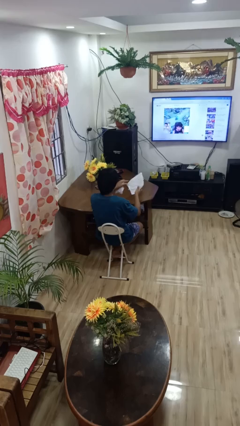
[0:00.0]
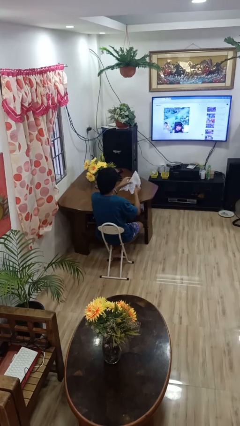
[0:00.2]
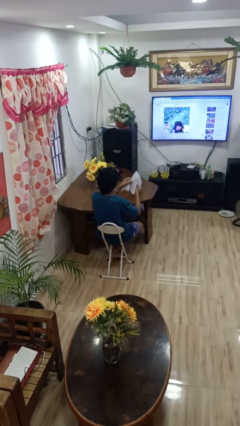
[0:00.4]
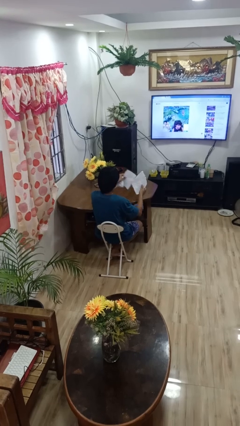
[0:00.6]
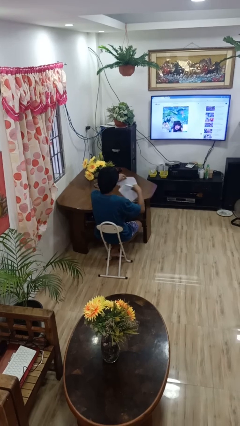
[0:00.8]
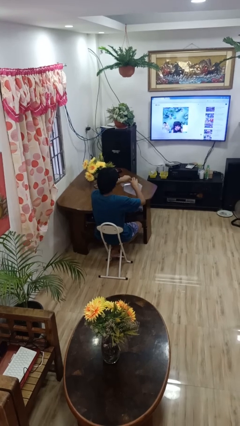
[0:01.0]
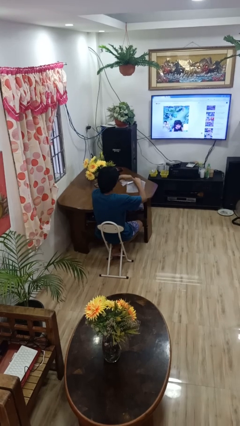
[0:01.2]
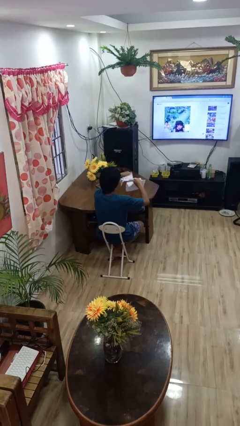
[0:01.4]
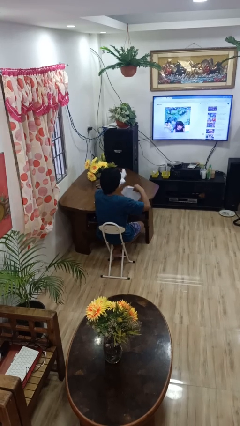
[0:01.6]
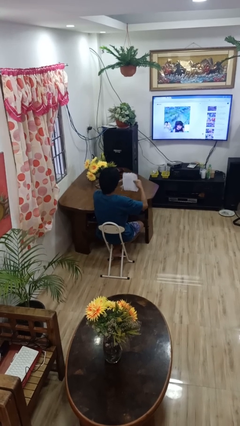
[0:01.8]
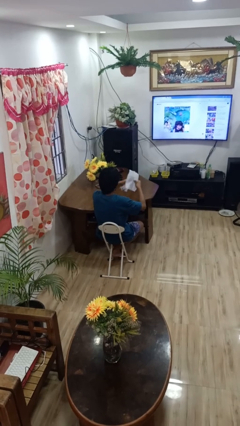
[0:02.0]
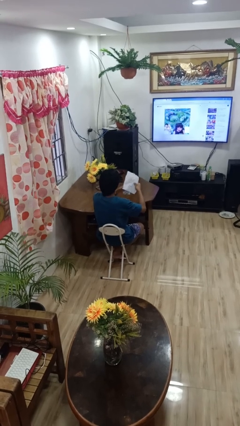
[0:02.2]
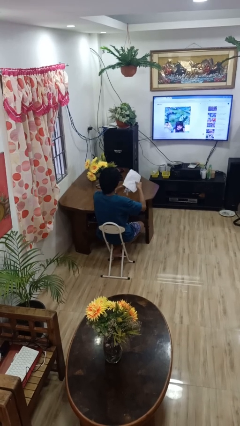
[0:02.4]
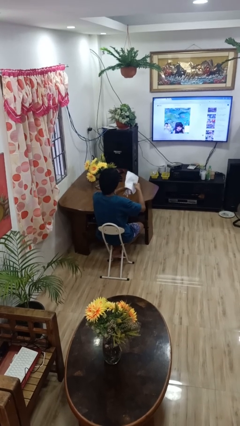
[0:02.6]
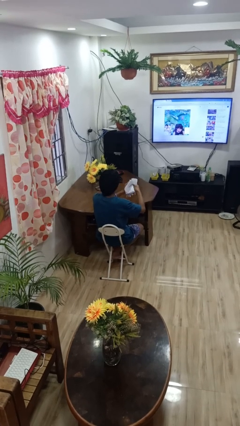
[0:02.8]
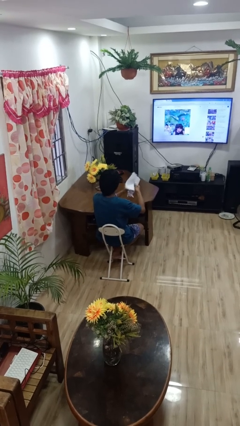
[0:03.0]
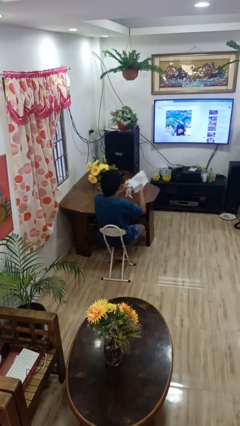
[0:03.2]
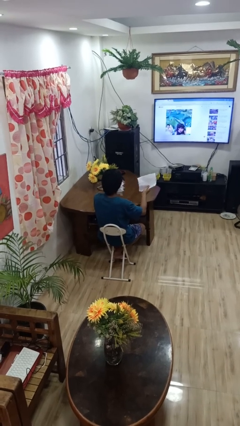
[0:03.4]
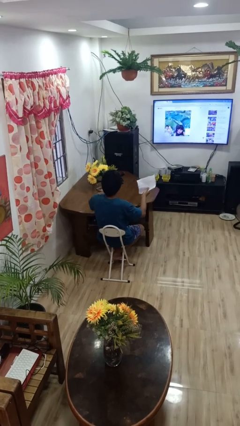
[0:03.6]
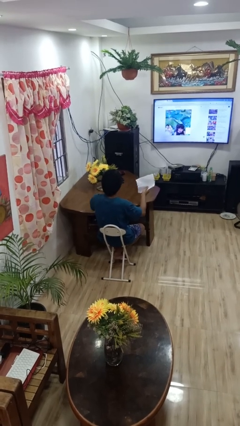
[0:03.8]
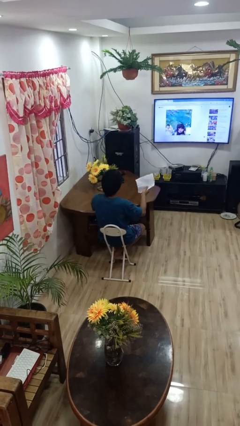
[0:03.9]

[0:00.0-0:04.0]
person tears paper

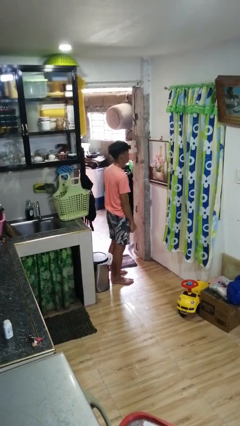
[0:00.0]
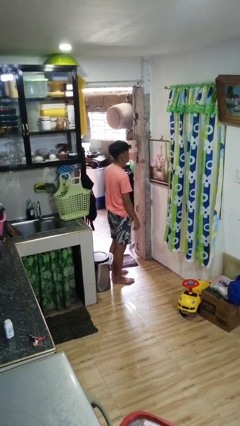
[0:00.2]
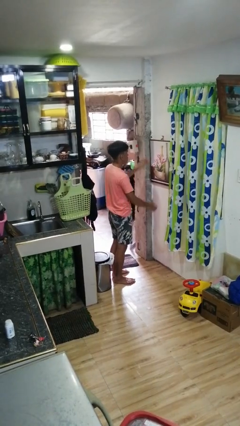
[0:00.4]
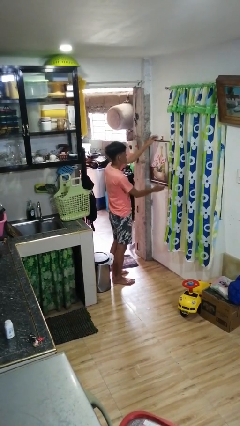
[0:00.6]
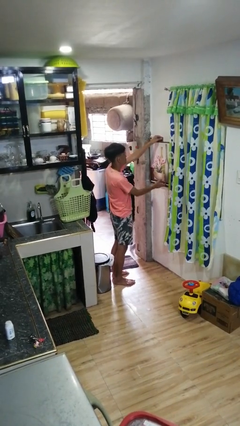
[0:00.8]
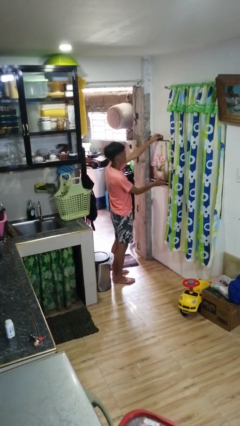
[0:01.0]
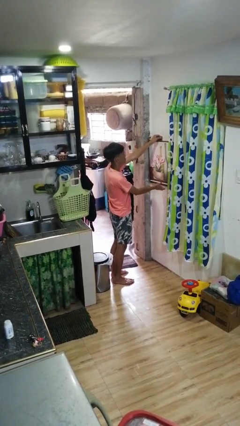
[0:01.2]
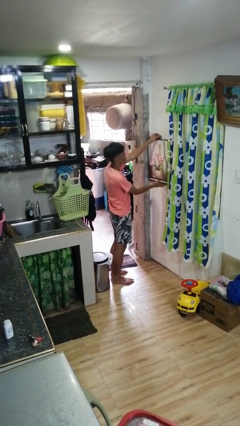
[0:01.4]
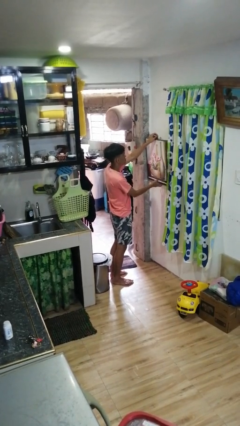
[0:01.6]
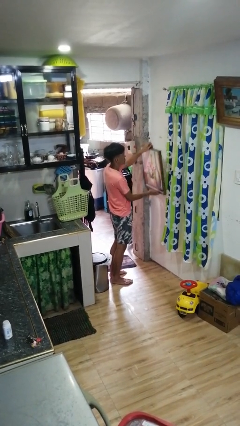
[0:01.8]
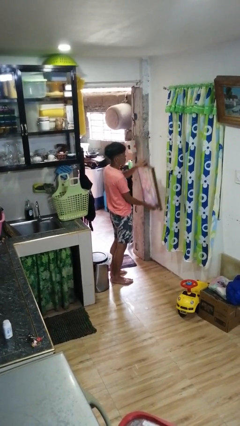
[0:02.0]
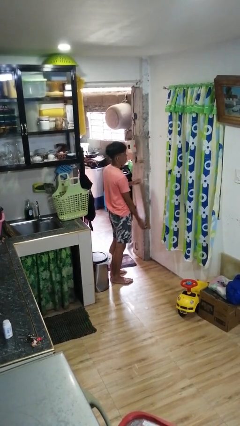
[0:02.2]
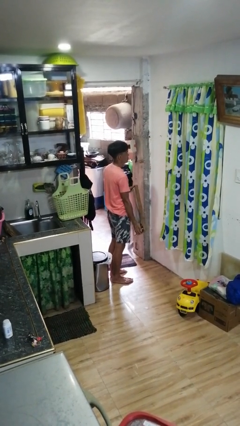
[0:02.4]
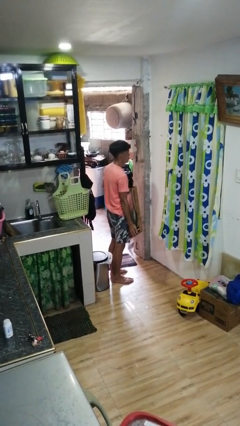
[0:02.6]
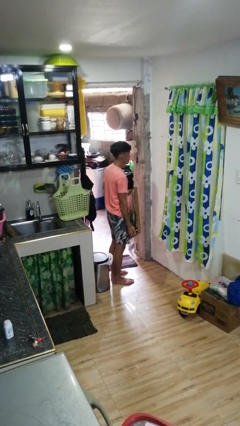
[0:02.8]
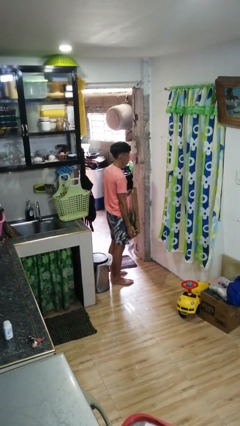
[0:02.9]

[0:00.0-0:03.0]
person takes down picture frame

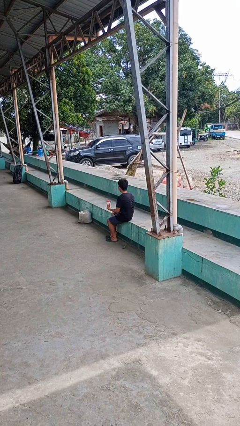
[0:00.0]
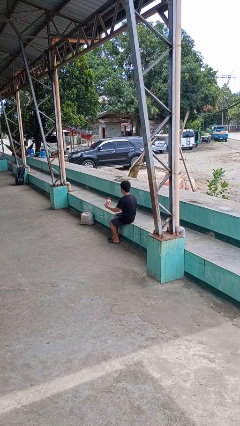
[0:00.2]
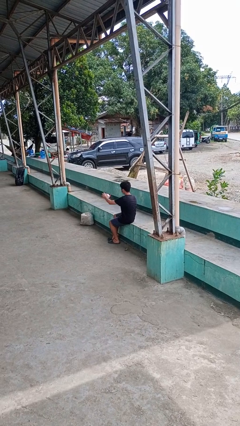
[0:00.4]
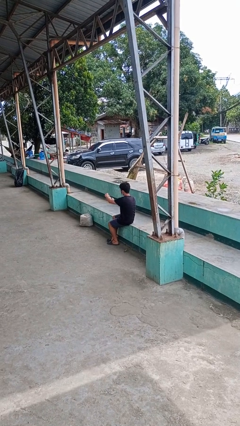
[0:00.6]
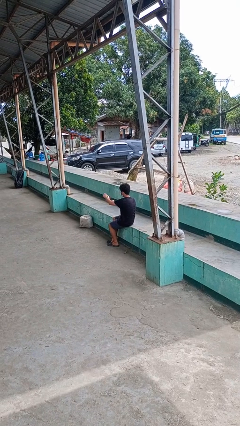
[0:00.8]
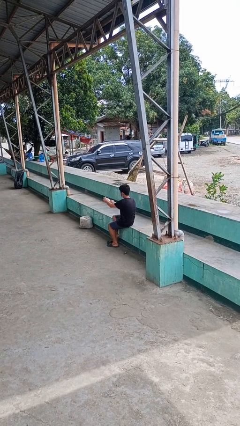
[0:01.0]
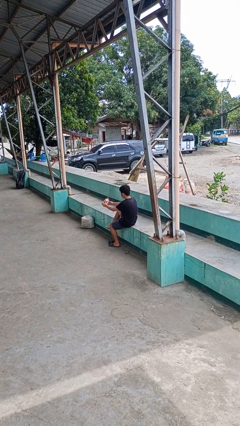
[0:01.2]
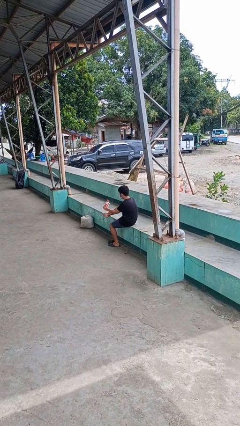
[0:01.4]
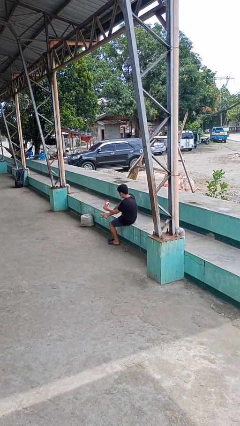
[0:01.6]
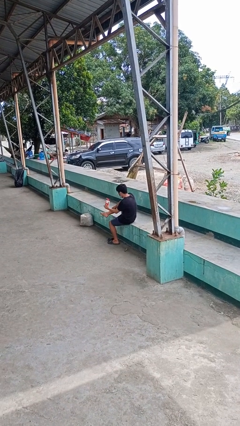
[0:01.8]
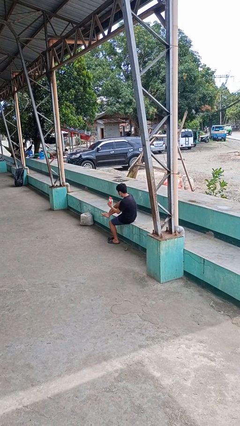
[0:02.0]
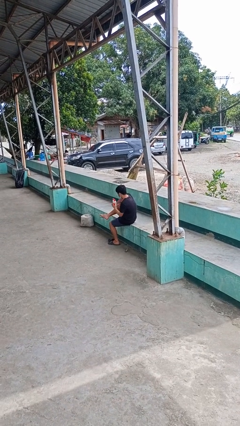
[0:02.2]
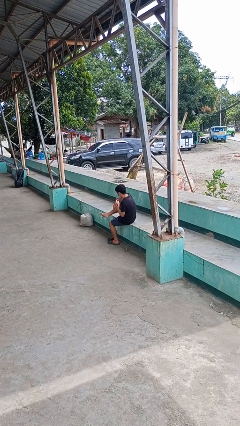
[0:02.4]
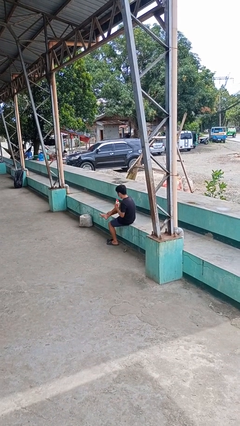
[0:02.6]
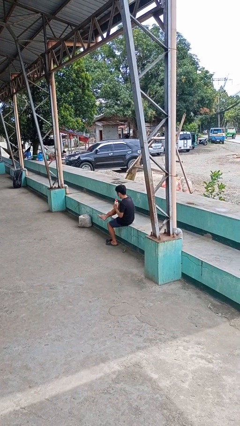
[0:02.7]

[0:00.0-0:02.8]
person applies sunscreen

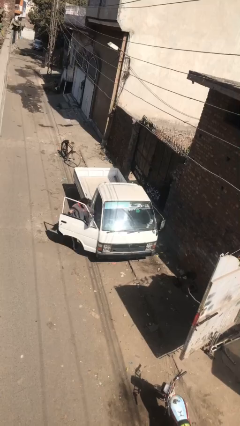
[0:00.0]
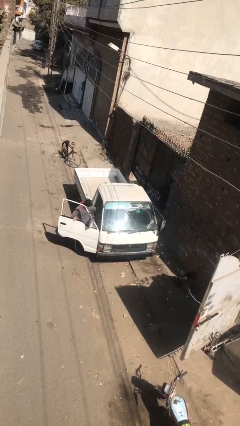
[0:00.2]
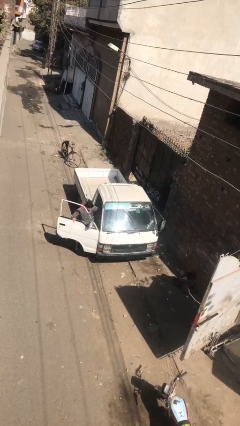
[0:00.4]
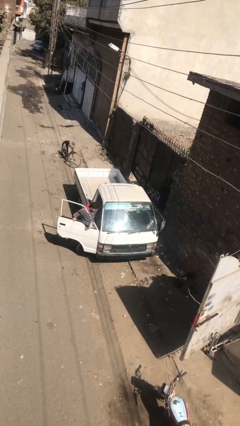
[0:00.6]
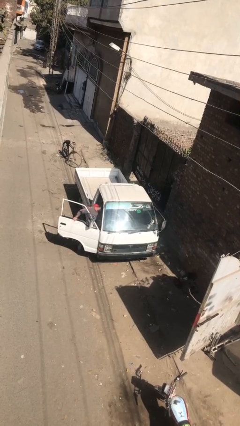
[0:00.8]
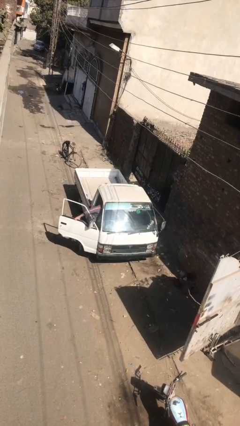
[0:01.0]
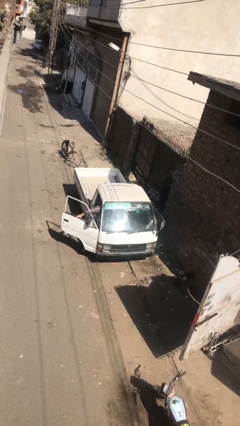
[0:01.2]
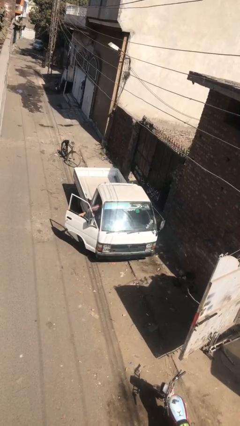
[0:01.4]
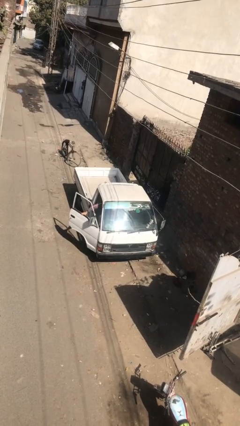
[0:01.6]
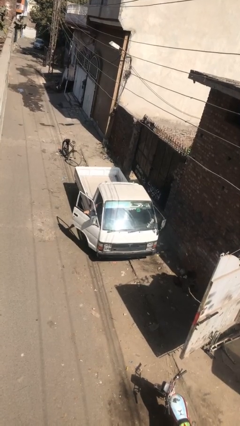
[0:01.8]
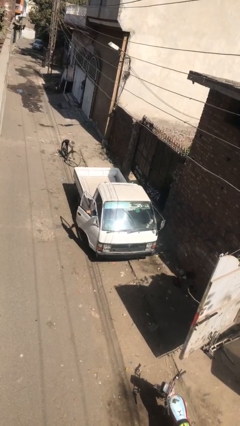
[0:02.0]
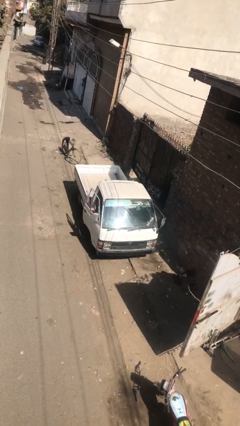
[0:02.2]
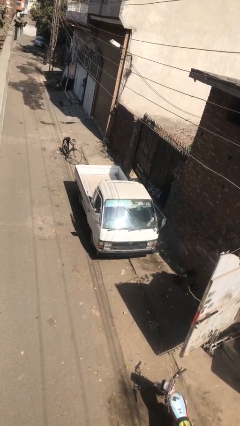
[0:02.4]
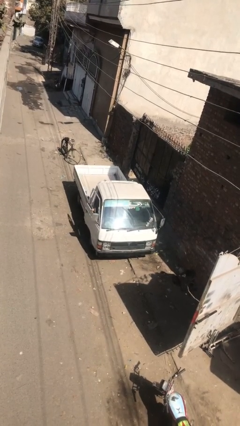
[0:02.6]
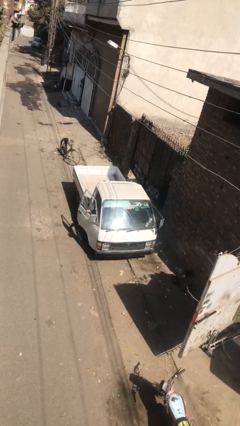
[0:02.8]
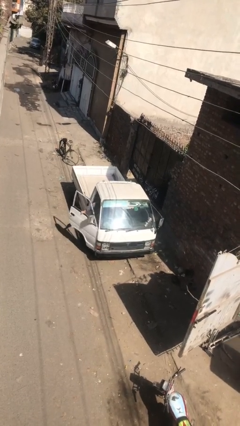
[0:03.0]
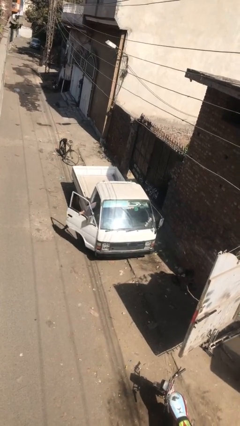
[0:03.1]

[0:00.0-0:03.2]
car picks up person

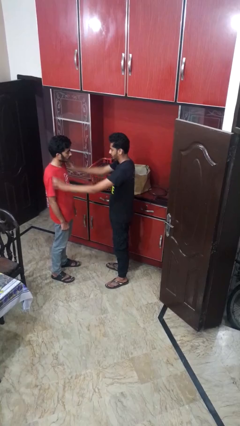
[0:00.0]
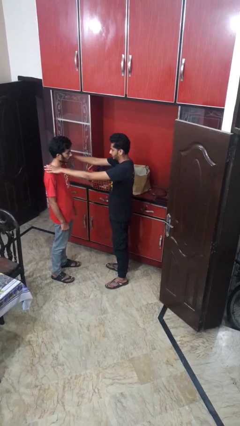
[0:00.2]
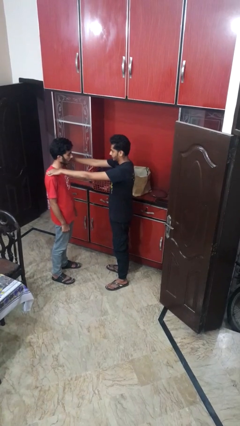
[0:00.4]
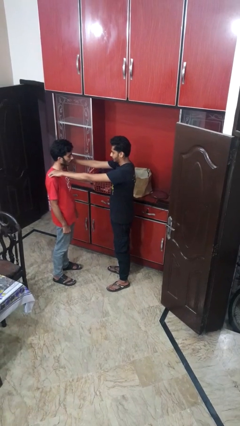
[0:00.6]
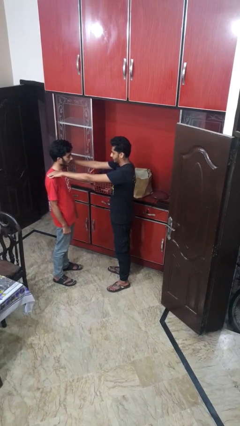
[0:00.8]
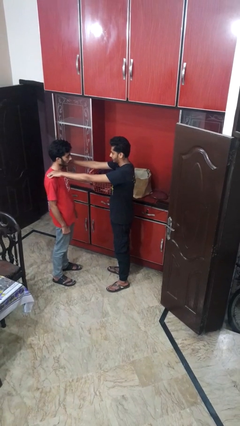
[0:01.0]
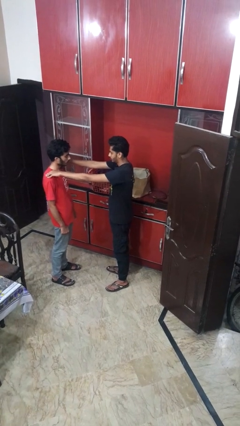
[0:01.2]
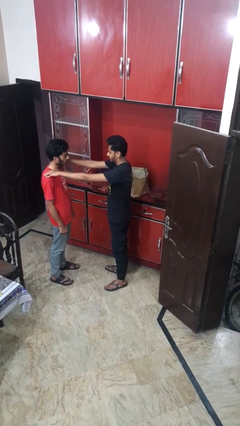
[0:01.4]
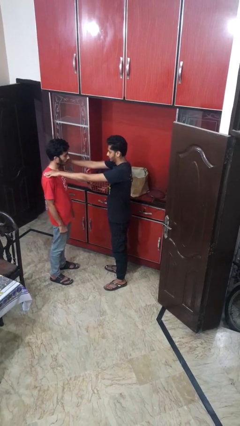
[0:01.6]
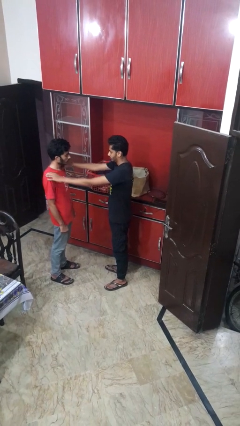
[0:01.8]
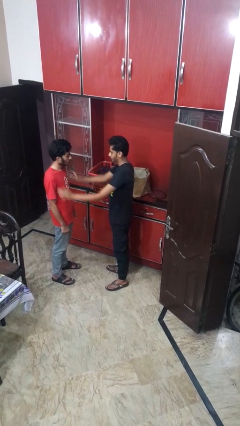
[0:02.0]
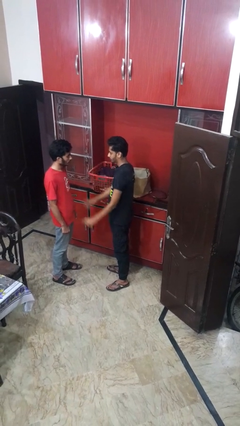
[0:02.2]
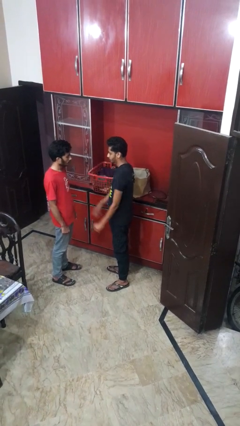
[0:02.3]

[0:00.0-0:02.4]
person pounds shoulders of person

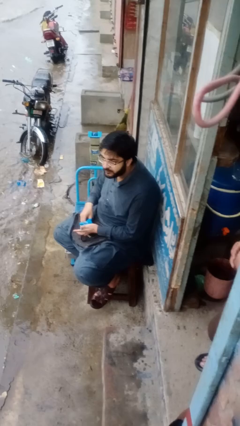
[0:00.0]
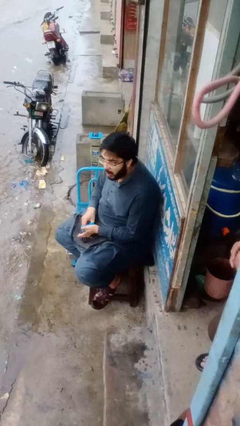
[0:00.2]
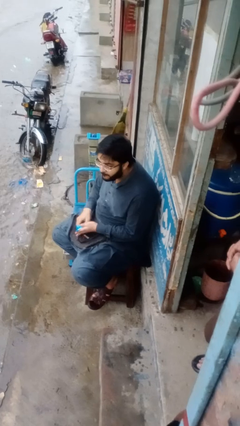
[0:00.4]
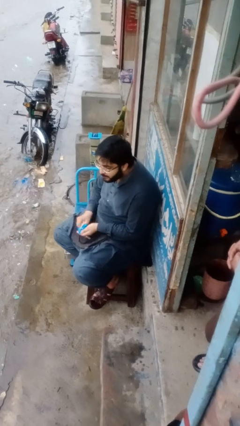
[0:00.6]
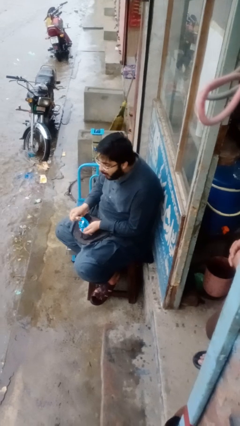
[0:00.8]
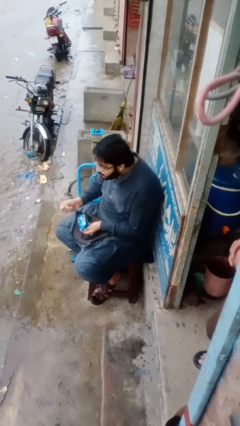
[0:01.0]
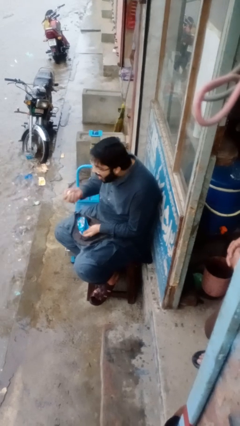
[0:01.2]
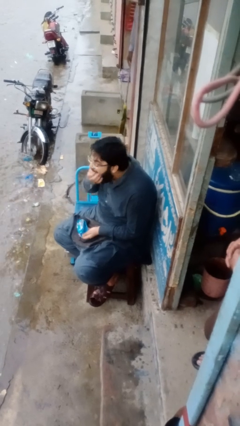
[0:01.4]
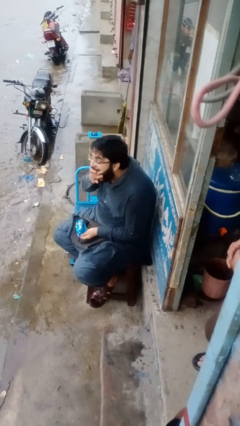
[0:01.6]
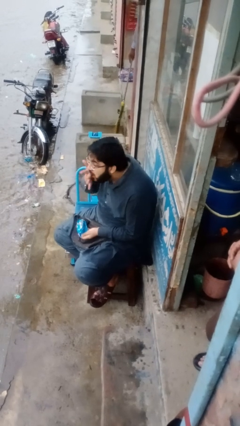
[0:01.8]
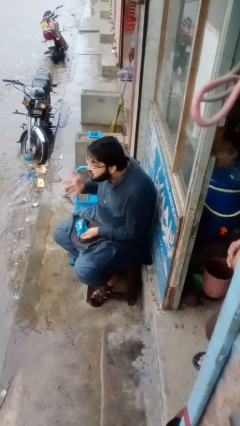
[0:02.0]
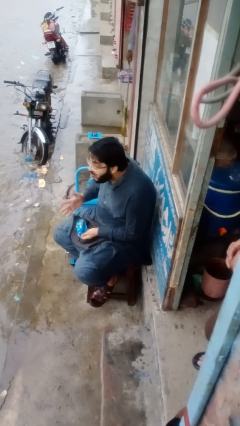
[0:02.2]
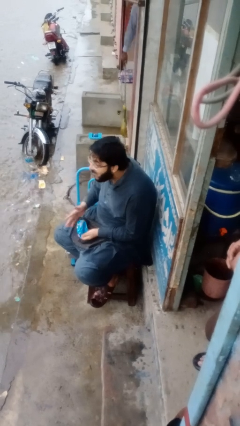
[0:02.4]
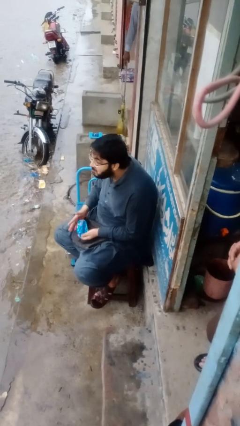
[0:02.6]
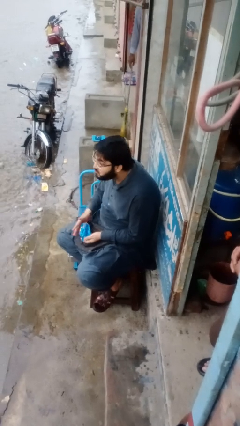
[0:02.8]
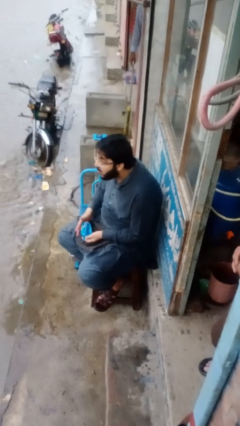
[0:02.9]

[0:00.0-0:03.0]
person eats snack from bag
